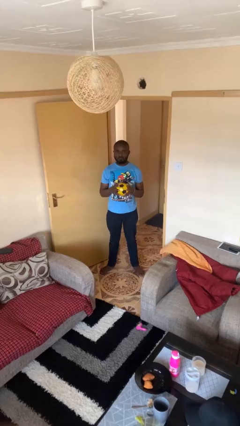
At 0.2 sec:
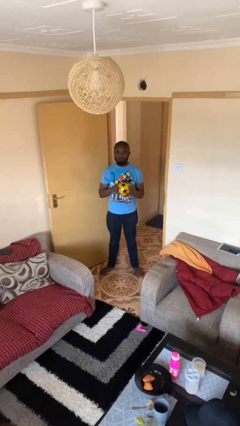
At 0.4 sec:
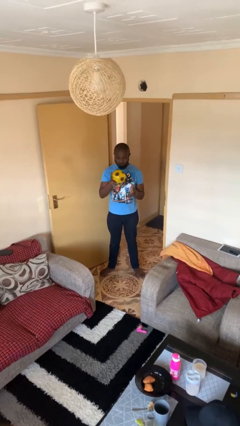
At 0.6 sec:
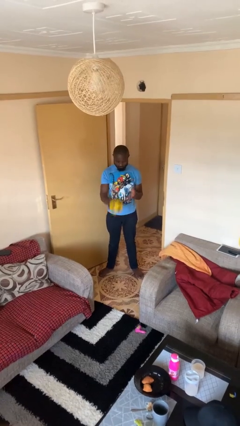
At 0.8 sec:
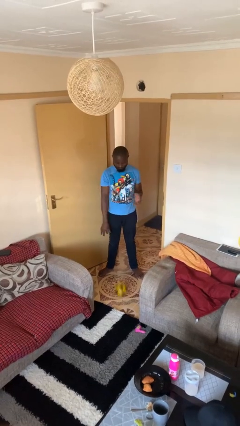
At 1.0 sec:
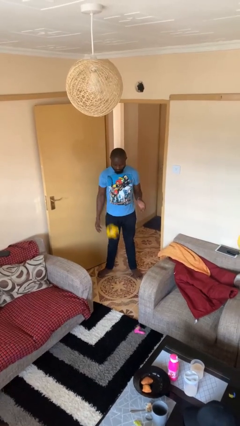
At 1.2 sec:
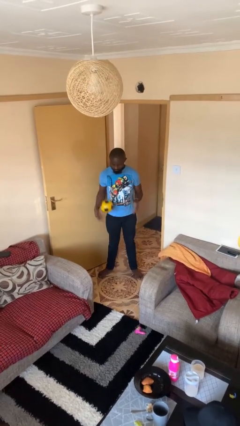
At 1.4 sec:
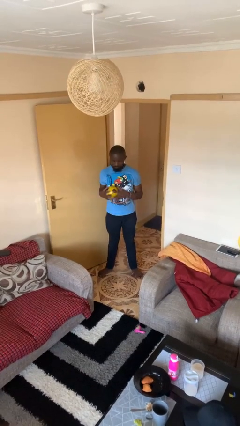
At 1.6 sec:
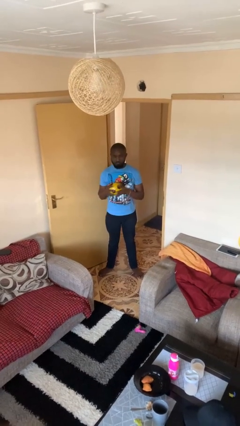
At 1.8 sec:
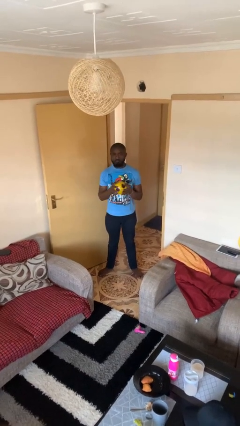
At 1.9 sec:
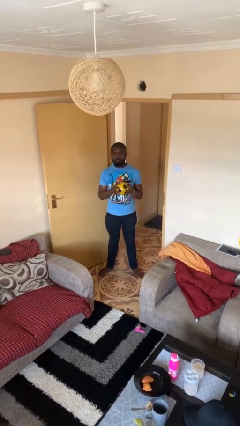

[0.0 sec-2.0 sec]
person bounces ball on floor

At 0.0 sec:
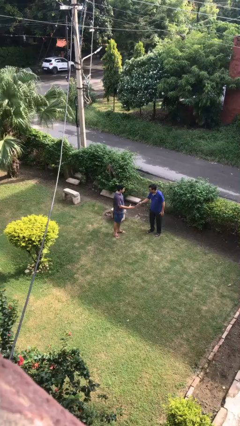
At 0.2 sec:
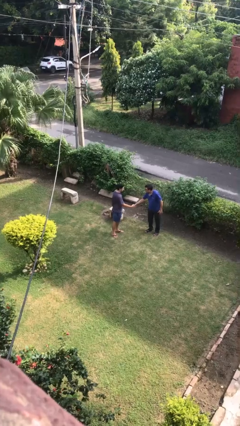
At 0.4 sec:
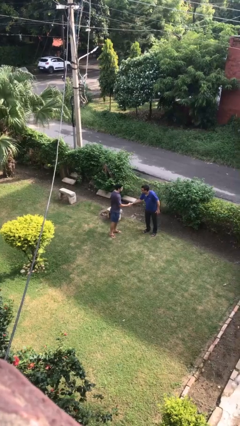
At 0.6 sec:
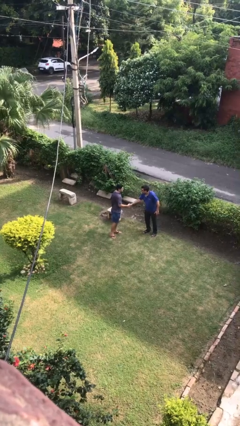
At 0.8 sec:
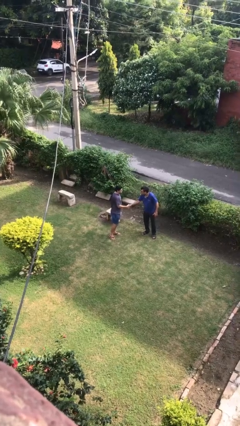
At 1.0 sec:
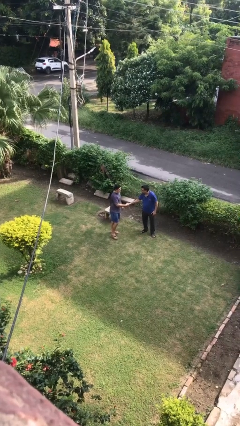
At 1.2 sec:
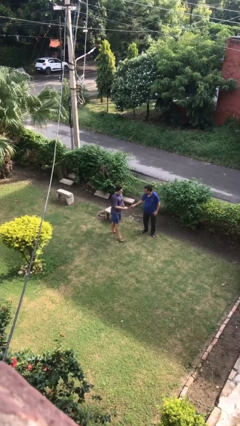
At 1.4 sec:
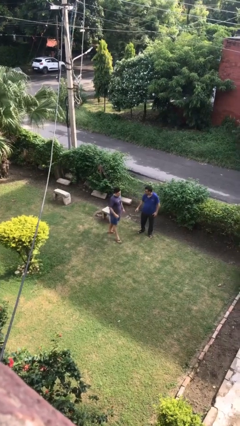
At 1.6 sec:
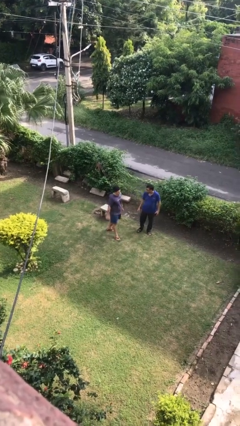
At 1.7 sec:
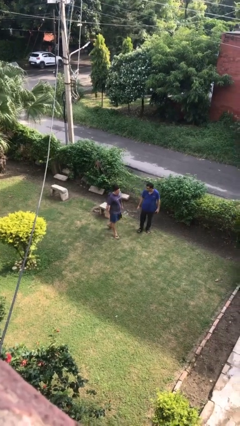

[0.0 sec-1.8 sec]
person shakes hand

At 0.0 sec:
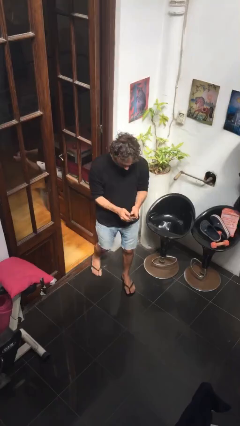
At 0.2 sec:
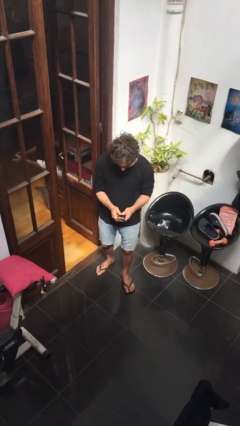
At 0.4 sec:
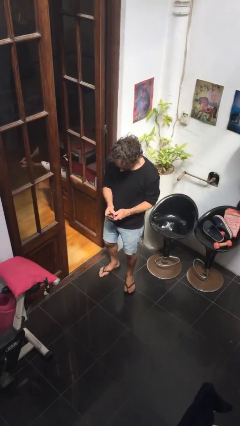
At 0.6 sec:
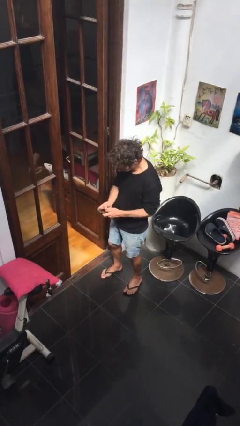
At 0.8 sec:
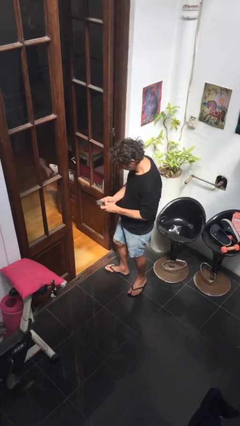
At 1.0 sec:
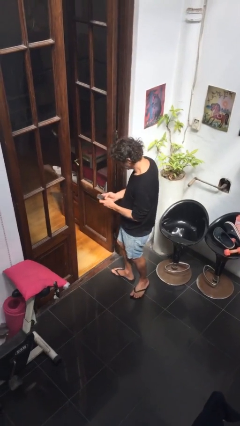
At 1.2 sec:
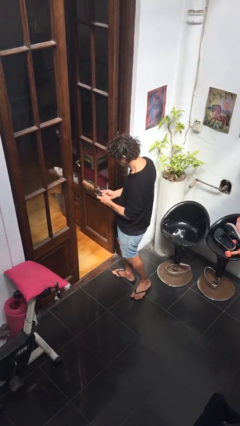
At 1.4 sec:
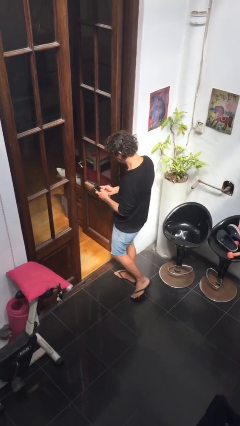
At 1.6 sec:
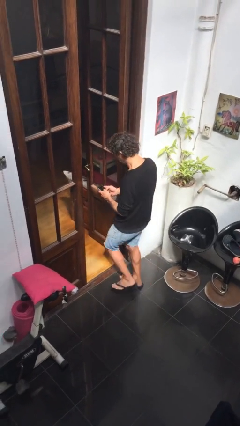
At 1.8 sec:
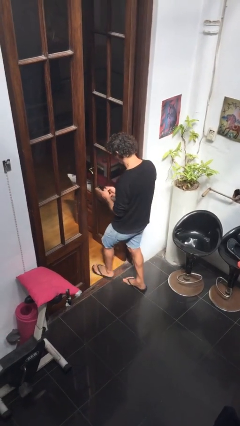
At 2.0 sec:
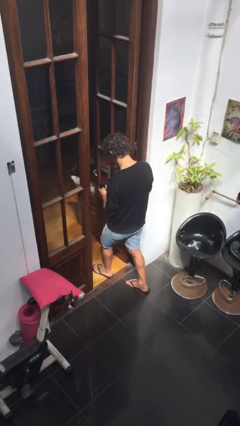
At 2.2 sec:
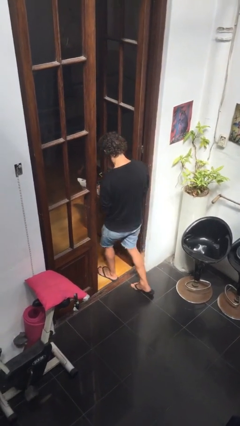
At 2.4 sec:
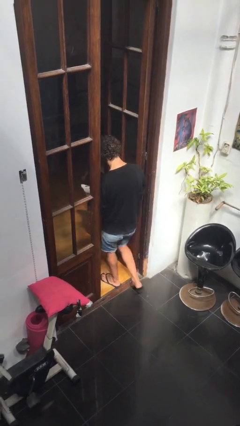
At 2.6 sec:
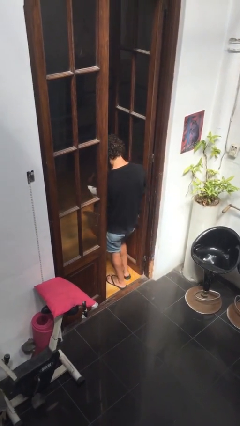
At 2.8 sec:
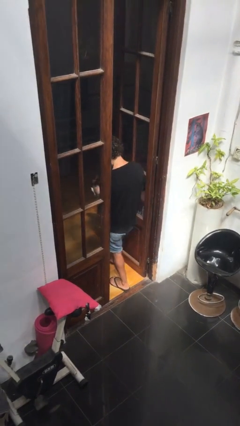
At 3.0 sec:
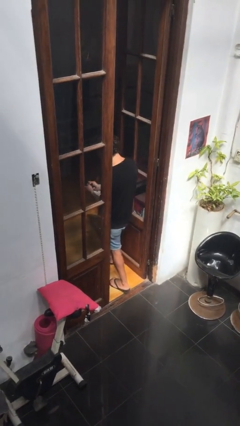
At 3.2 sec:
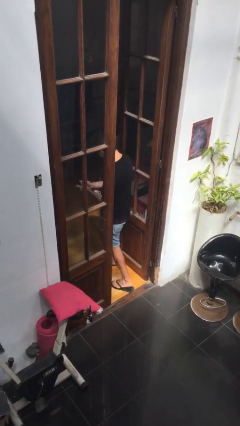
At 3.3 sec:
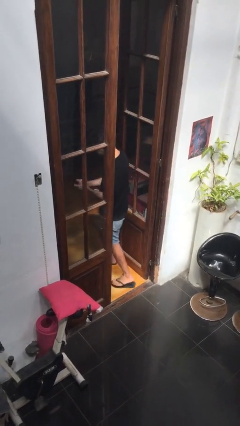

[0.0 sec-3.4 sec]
person exits scene through structure

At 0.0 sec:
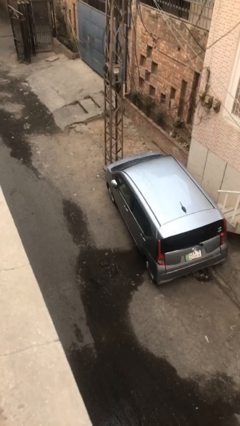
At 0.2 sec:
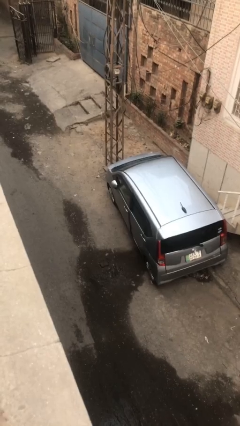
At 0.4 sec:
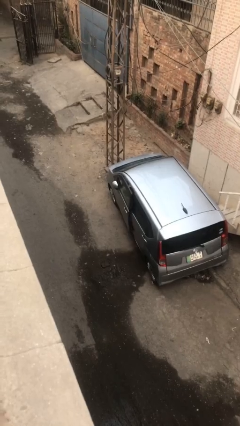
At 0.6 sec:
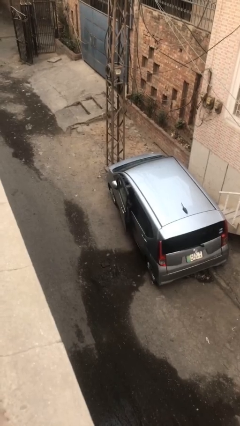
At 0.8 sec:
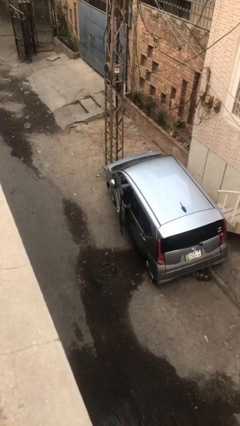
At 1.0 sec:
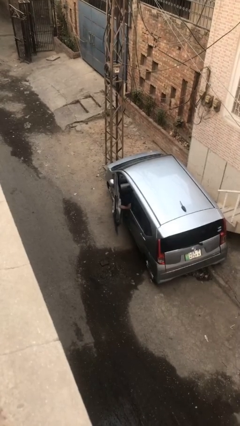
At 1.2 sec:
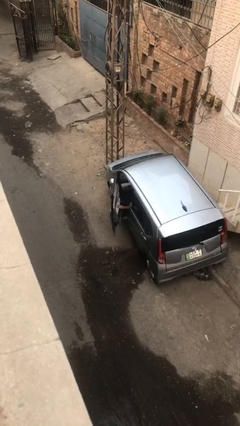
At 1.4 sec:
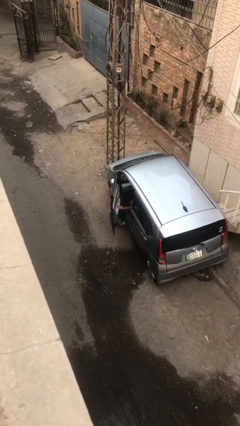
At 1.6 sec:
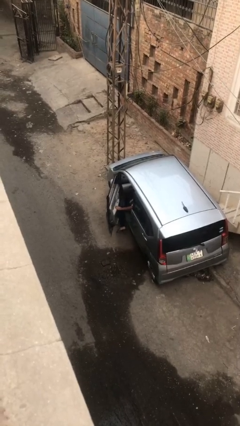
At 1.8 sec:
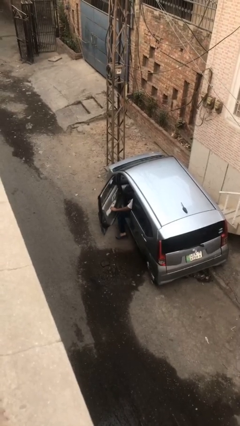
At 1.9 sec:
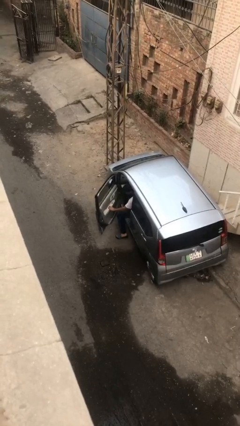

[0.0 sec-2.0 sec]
person opens car door

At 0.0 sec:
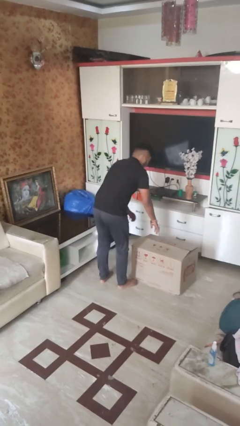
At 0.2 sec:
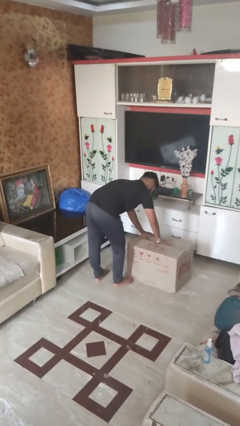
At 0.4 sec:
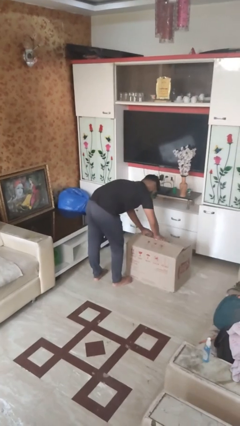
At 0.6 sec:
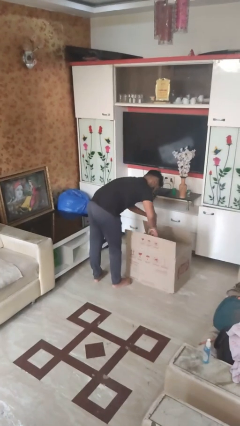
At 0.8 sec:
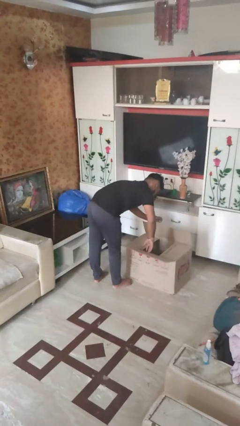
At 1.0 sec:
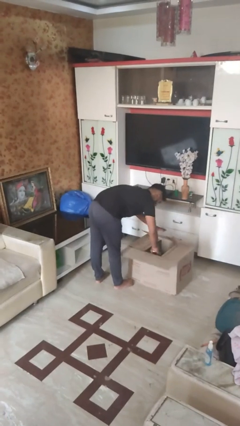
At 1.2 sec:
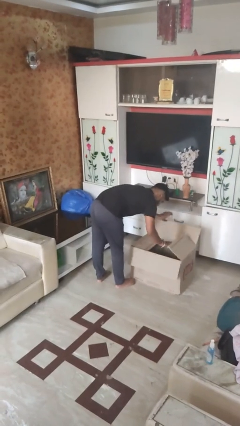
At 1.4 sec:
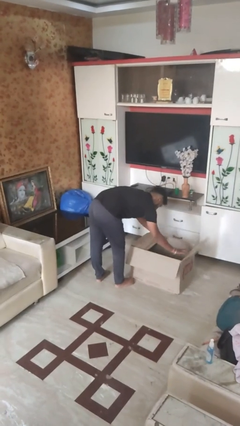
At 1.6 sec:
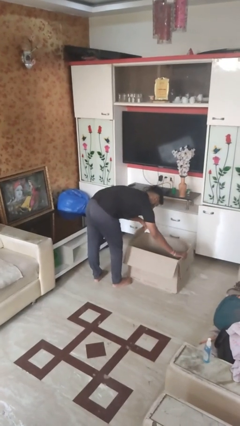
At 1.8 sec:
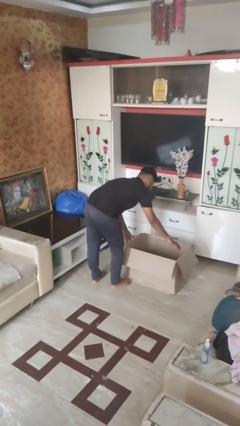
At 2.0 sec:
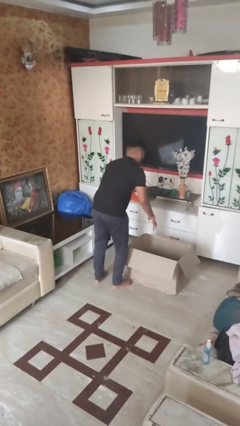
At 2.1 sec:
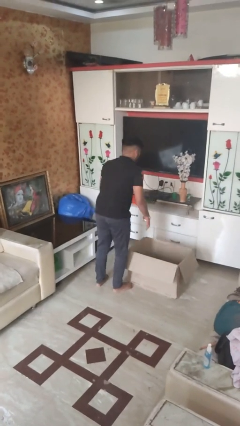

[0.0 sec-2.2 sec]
person opens box

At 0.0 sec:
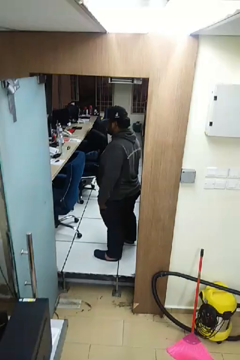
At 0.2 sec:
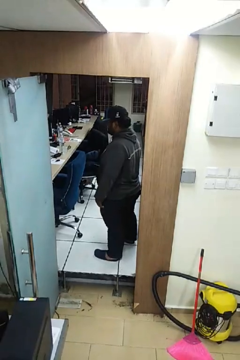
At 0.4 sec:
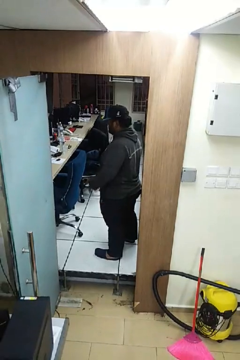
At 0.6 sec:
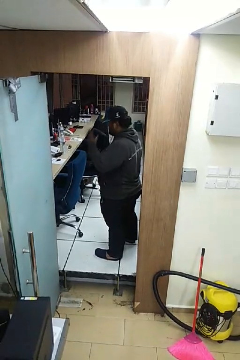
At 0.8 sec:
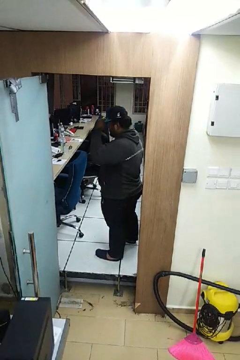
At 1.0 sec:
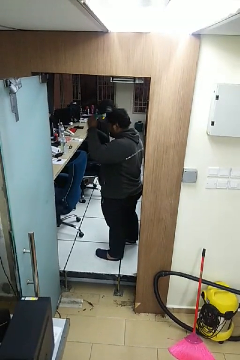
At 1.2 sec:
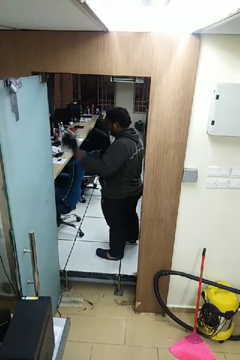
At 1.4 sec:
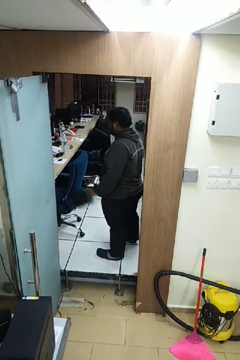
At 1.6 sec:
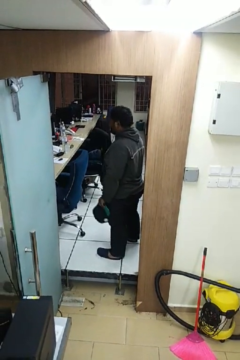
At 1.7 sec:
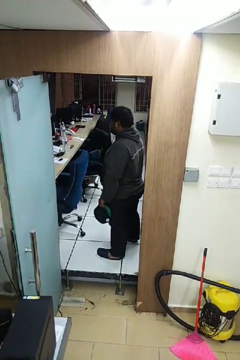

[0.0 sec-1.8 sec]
person takes off hat

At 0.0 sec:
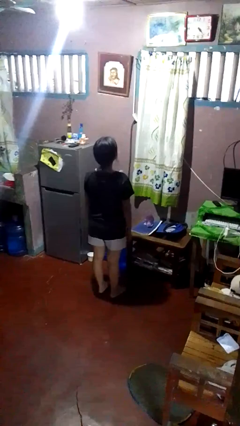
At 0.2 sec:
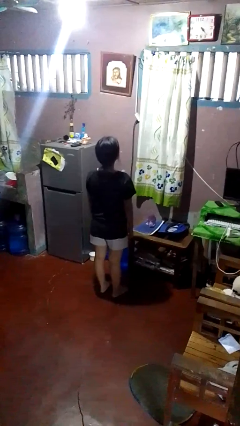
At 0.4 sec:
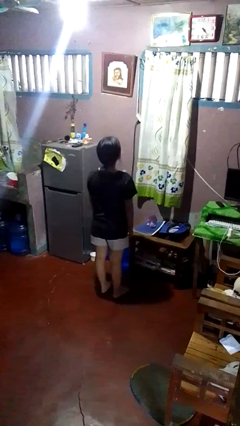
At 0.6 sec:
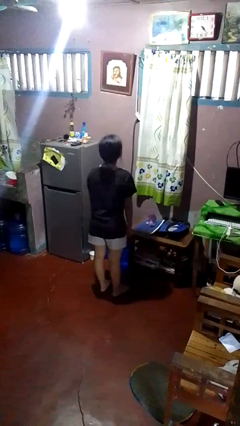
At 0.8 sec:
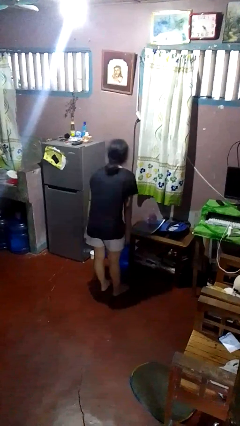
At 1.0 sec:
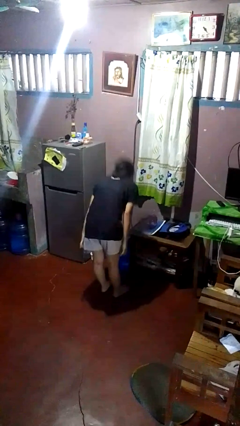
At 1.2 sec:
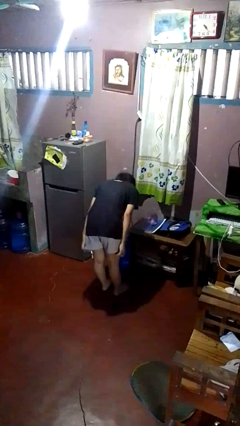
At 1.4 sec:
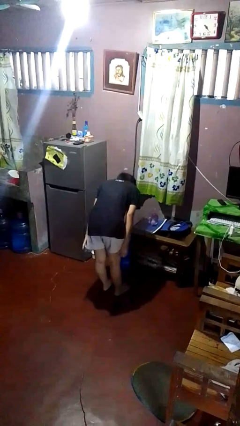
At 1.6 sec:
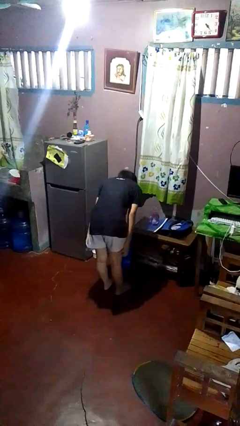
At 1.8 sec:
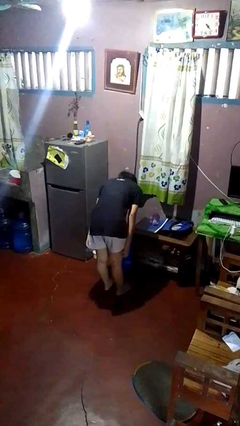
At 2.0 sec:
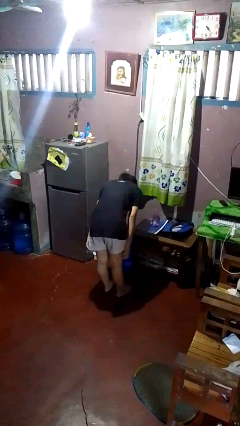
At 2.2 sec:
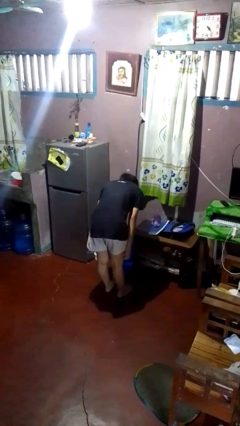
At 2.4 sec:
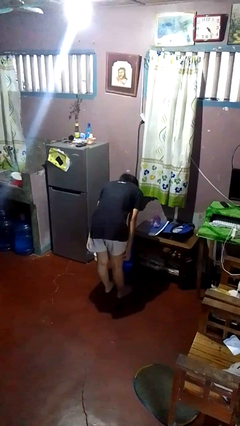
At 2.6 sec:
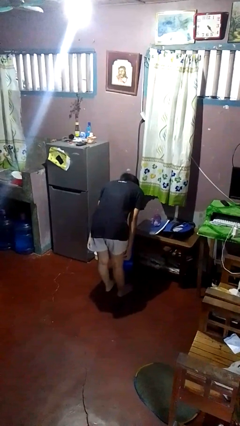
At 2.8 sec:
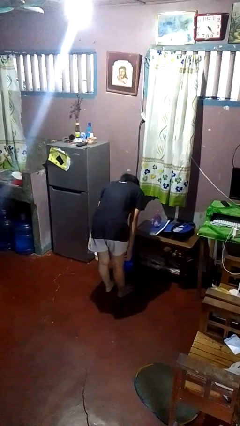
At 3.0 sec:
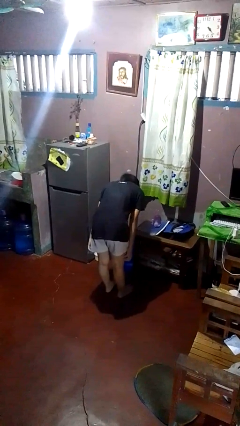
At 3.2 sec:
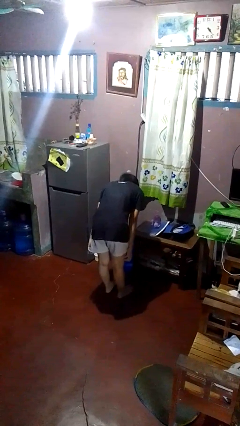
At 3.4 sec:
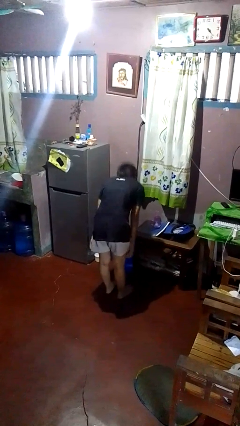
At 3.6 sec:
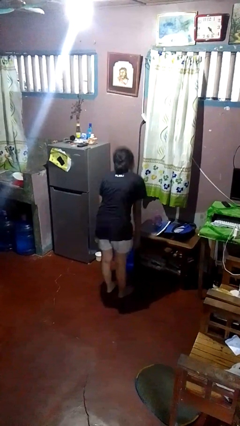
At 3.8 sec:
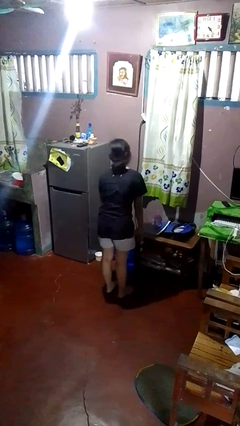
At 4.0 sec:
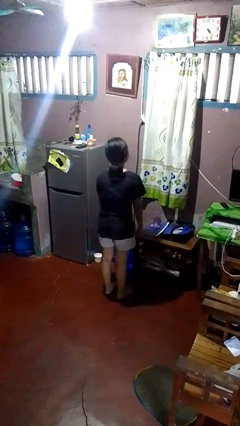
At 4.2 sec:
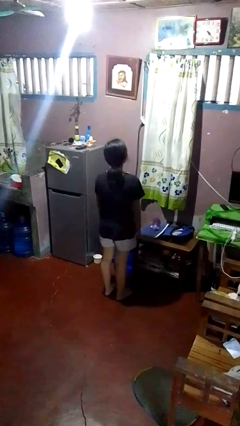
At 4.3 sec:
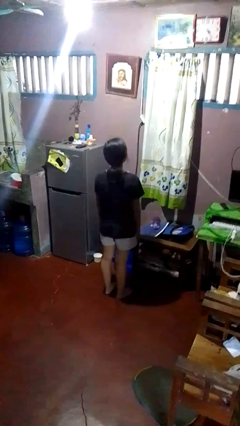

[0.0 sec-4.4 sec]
person bows
